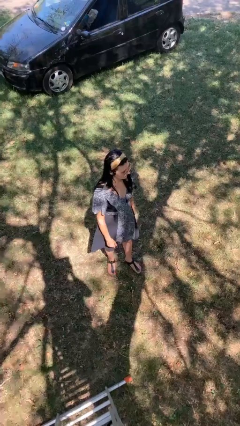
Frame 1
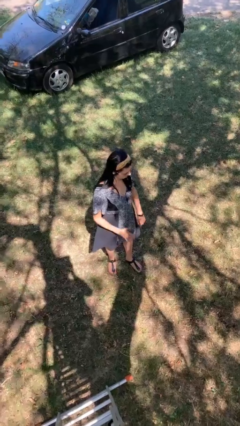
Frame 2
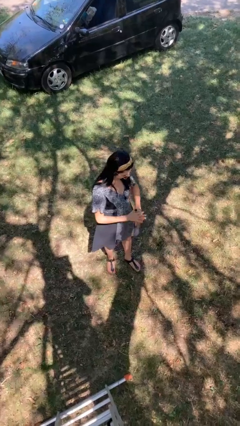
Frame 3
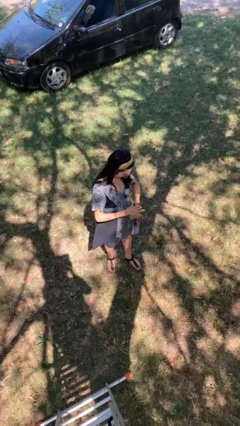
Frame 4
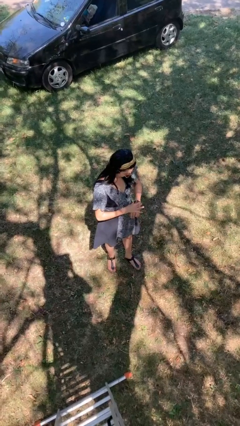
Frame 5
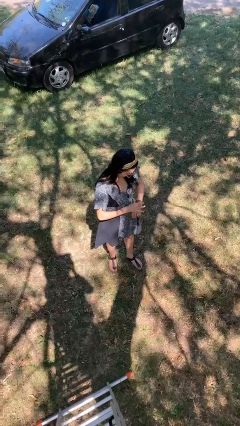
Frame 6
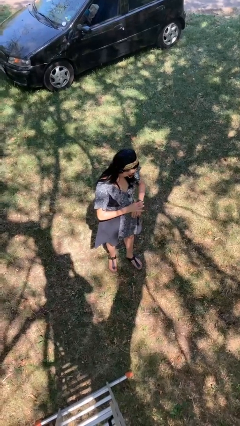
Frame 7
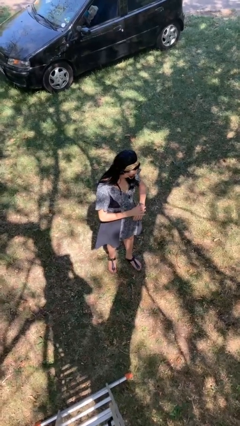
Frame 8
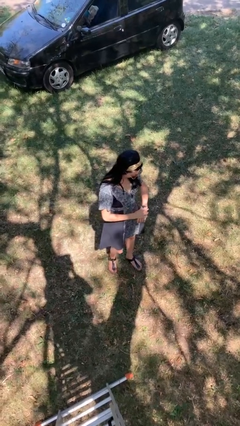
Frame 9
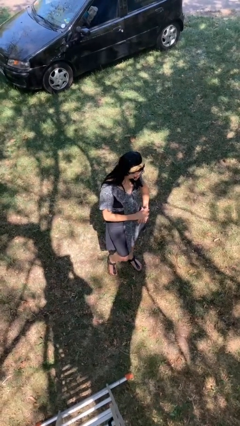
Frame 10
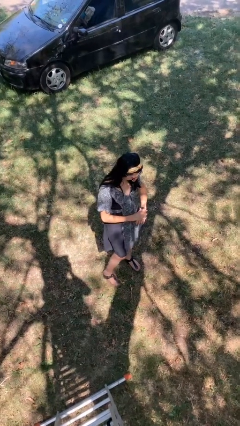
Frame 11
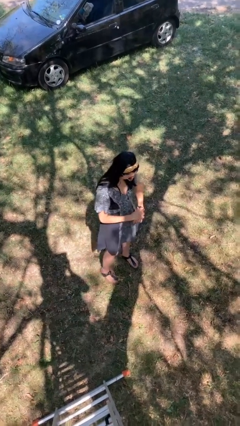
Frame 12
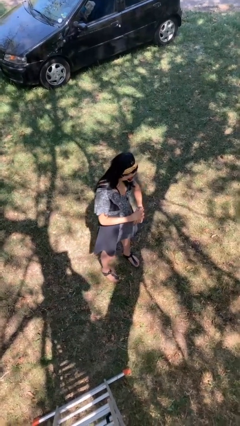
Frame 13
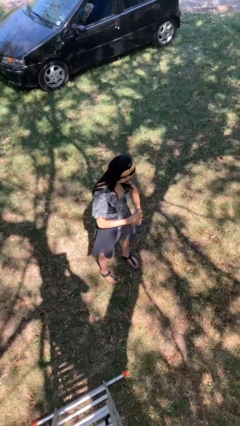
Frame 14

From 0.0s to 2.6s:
person looks at wristwatch

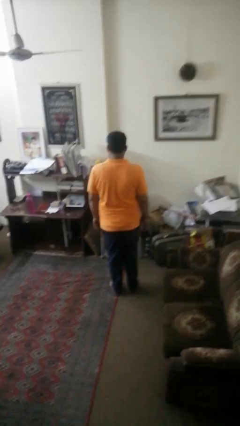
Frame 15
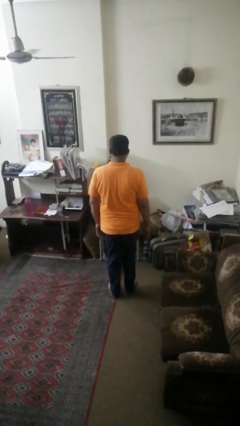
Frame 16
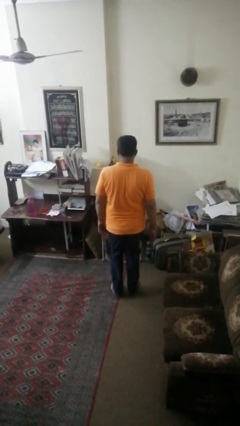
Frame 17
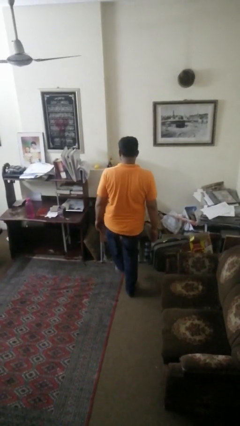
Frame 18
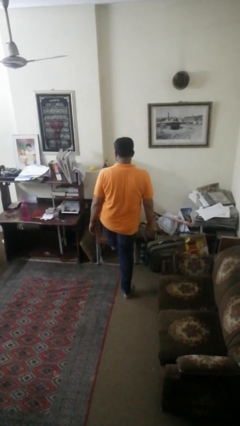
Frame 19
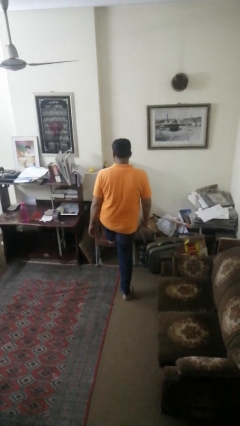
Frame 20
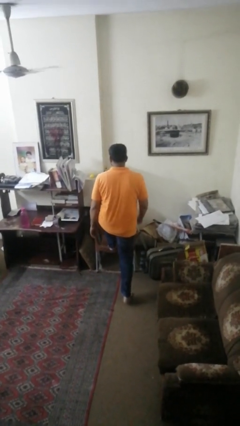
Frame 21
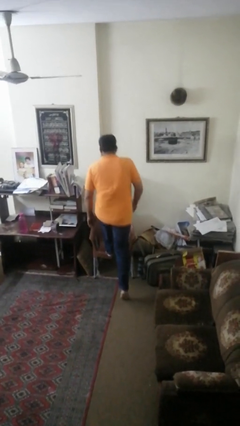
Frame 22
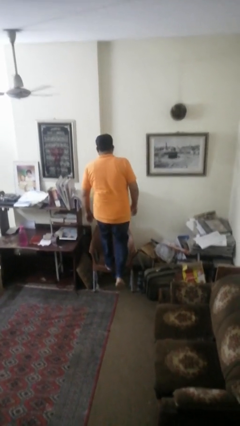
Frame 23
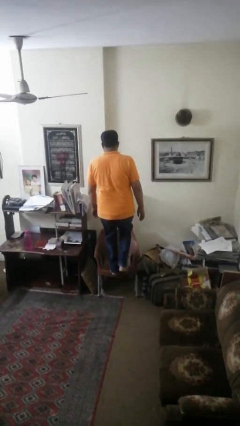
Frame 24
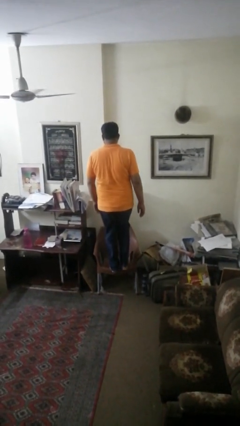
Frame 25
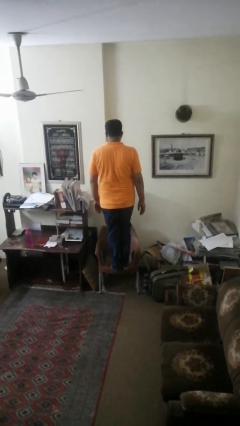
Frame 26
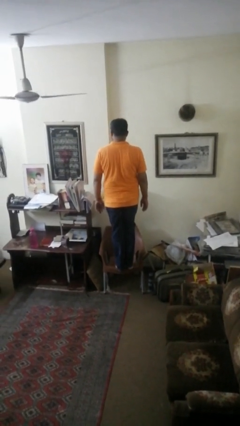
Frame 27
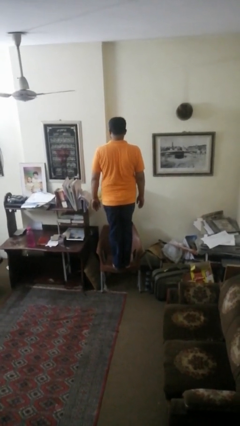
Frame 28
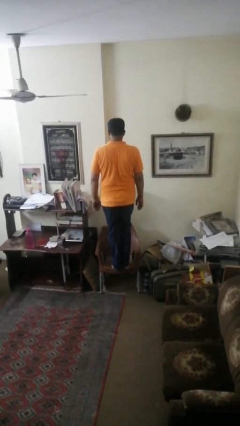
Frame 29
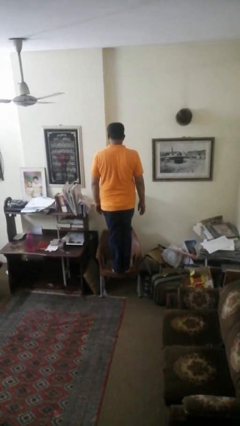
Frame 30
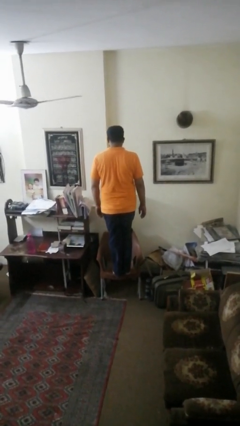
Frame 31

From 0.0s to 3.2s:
person climbs on chair

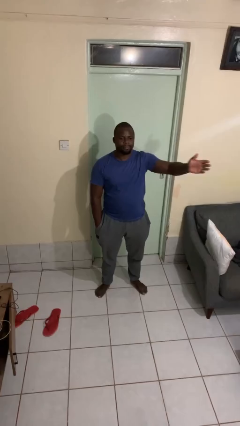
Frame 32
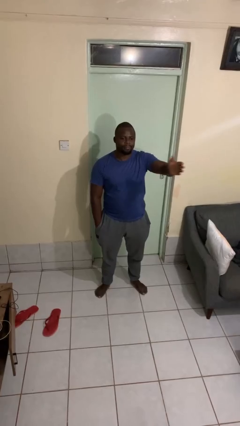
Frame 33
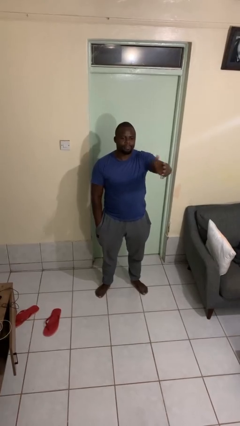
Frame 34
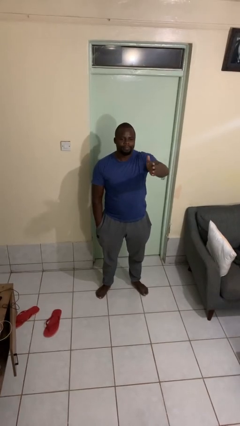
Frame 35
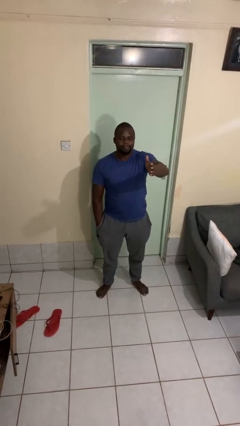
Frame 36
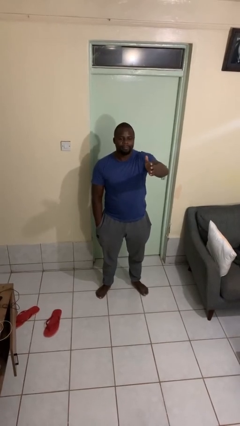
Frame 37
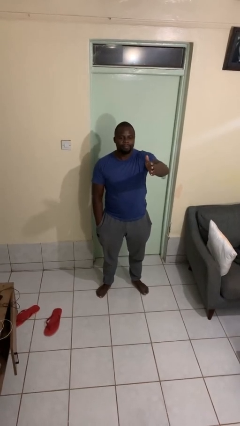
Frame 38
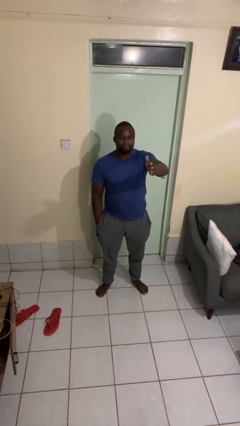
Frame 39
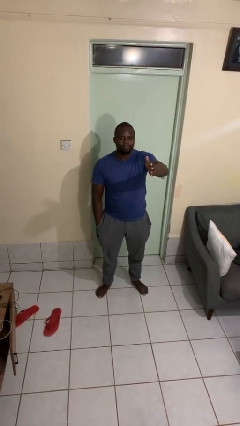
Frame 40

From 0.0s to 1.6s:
person gestures swipe right

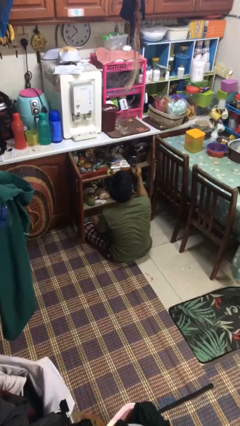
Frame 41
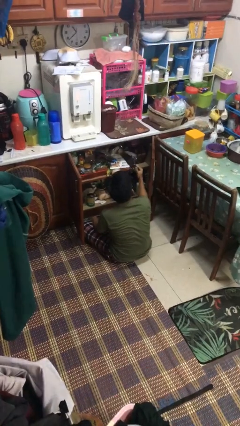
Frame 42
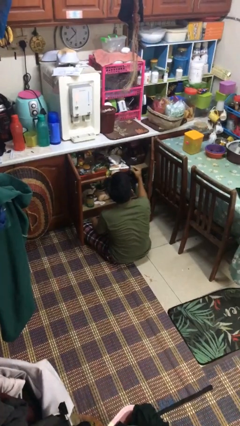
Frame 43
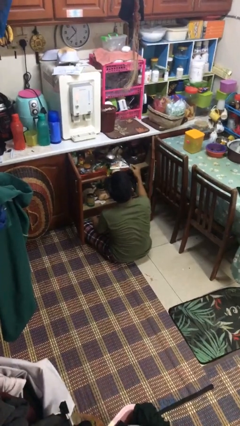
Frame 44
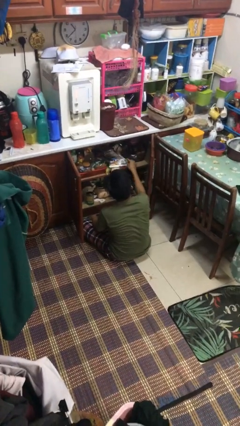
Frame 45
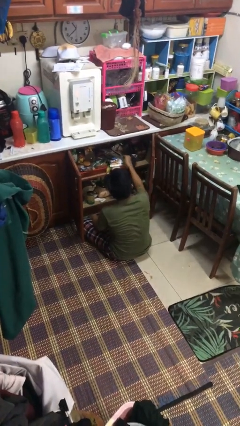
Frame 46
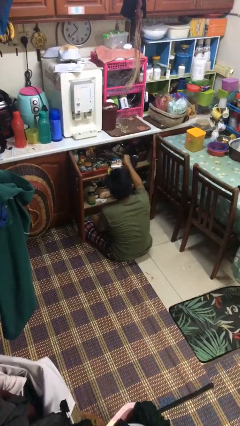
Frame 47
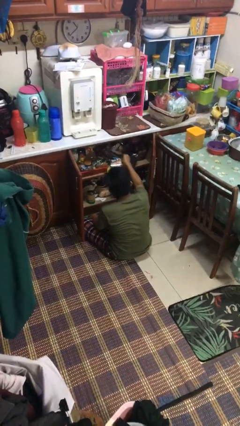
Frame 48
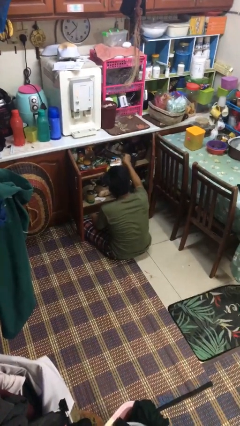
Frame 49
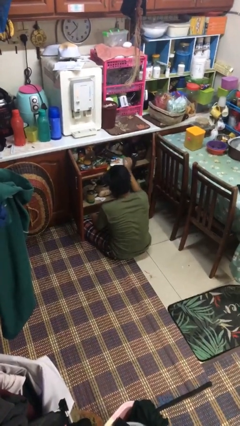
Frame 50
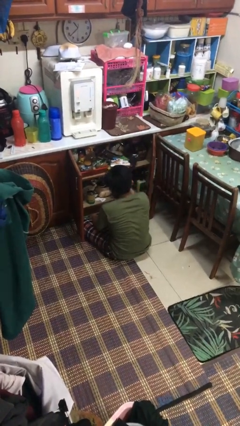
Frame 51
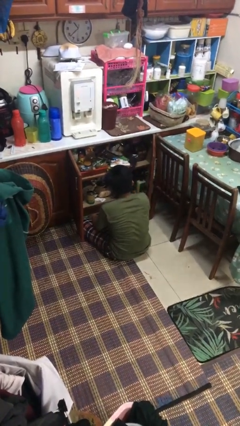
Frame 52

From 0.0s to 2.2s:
person puts object into kitchen drawer

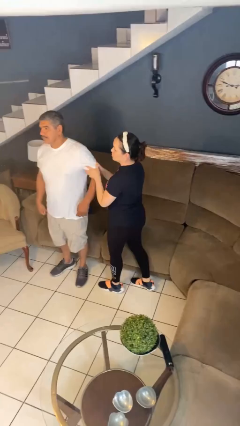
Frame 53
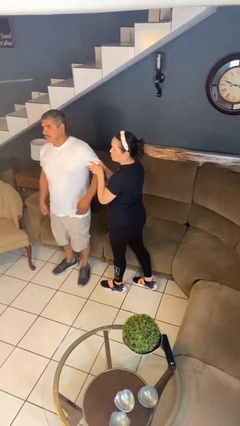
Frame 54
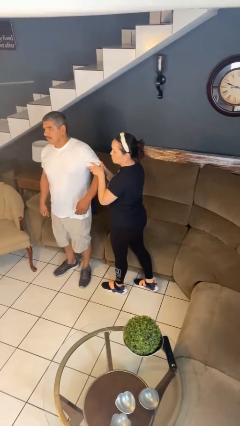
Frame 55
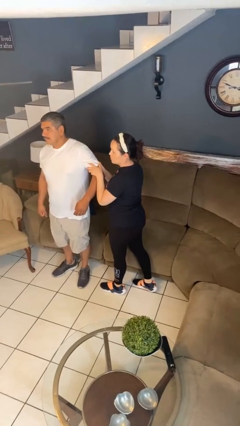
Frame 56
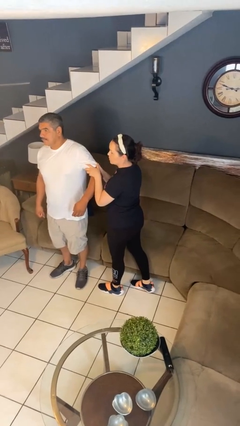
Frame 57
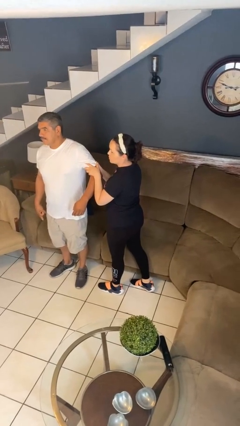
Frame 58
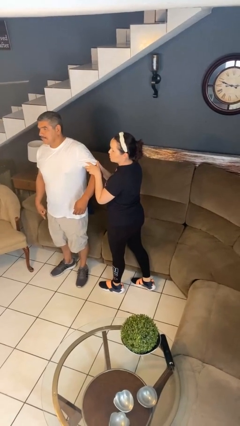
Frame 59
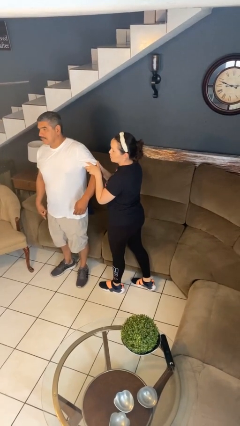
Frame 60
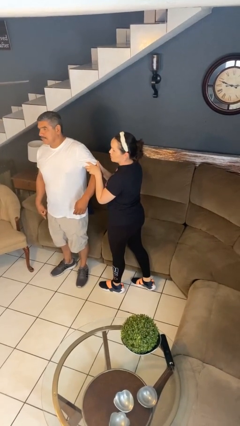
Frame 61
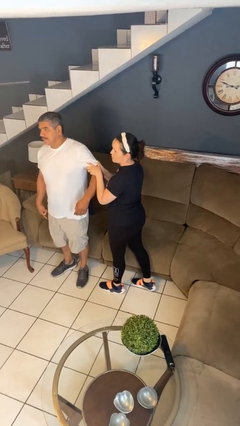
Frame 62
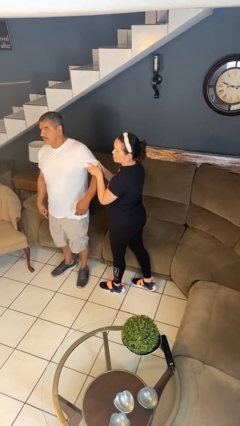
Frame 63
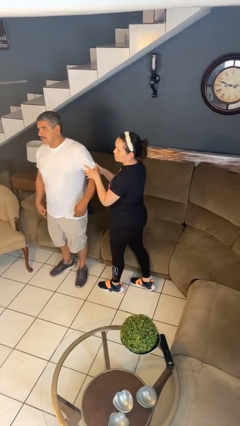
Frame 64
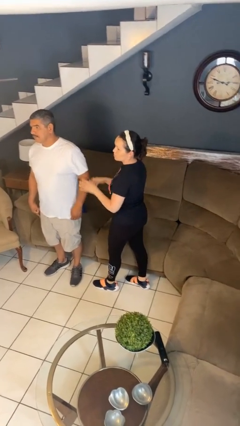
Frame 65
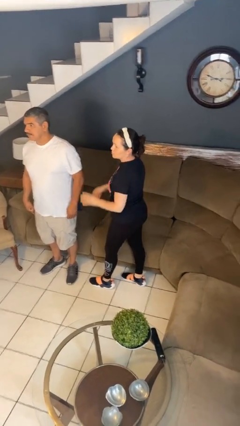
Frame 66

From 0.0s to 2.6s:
person grabs person by bicep

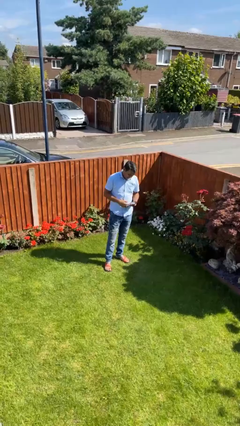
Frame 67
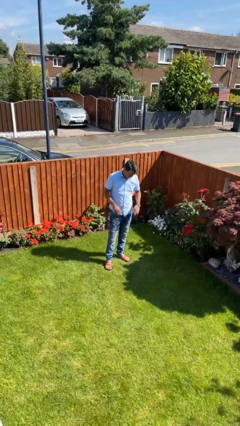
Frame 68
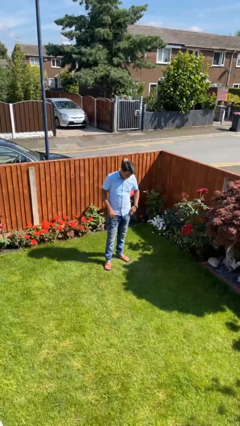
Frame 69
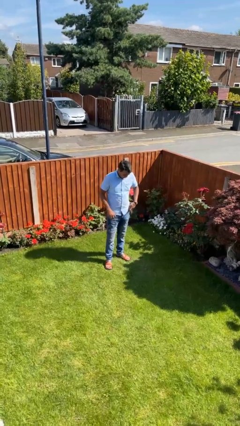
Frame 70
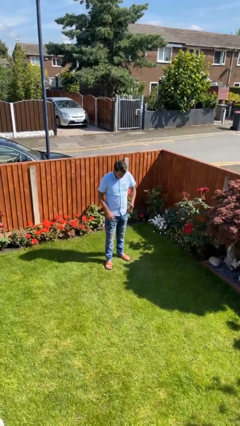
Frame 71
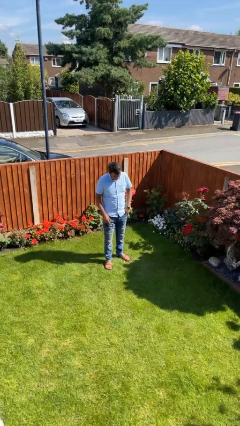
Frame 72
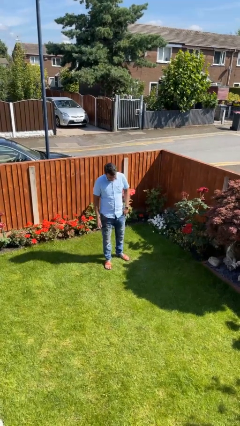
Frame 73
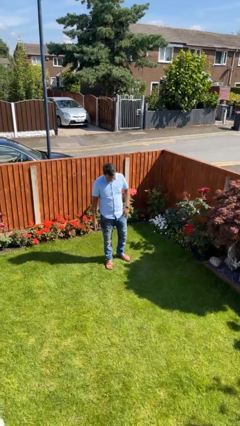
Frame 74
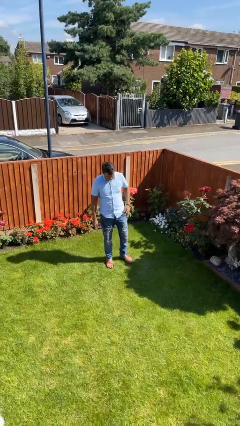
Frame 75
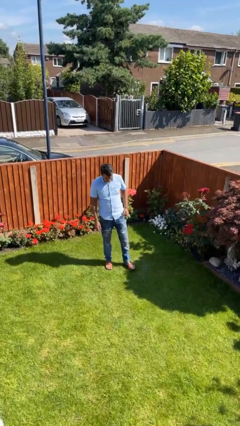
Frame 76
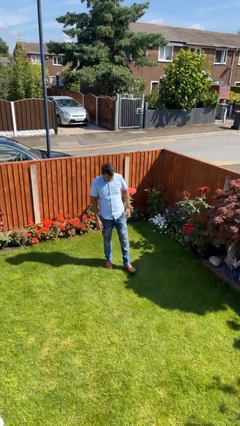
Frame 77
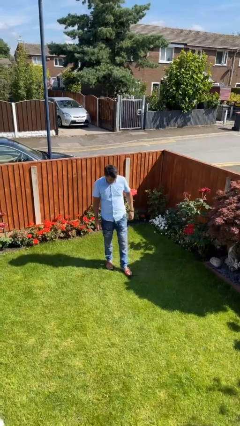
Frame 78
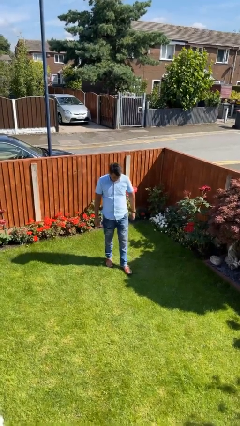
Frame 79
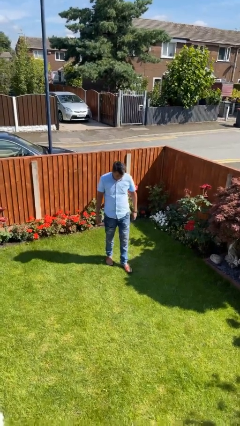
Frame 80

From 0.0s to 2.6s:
person puts phone into pocket

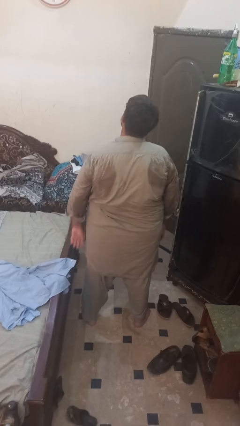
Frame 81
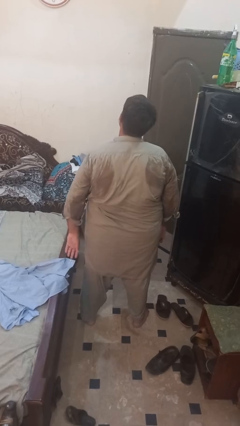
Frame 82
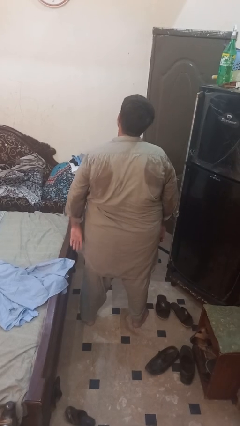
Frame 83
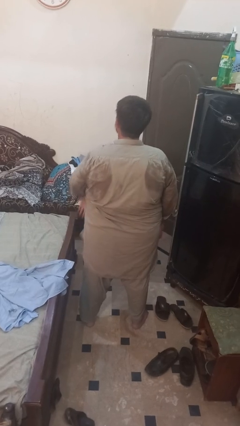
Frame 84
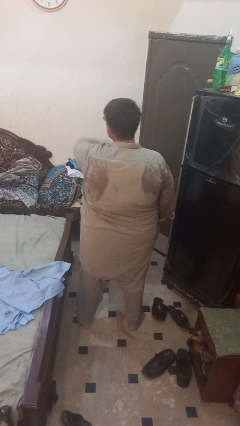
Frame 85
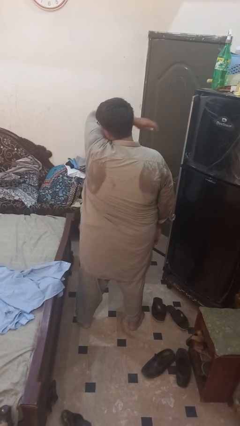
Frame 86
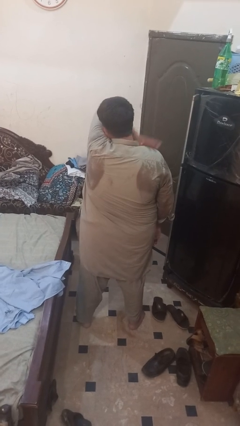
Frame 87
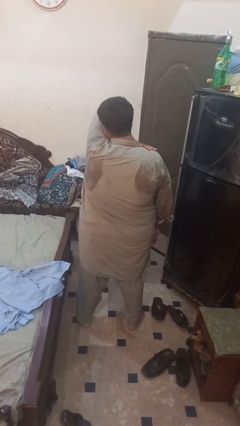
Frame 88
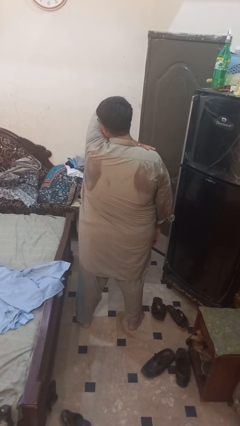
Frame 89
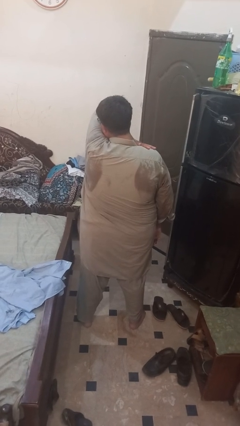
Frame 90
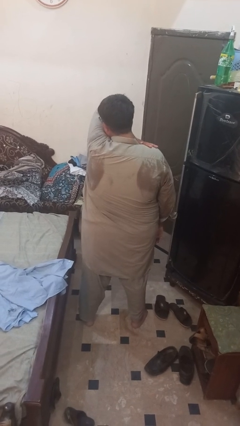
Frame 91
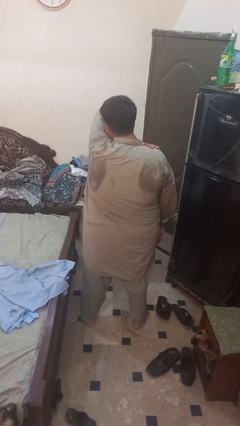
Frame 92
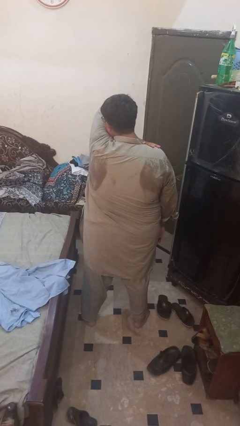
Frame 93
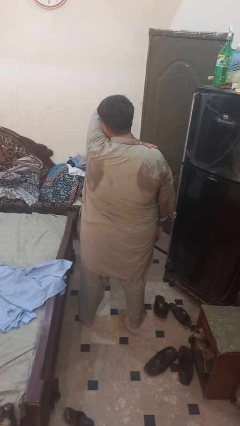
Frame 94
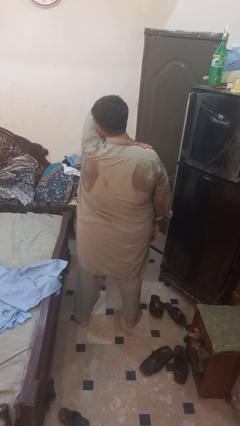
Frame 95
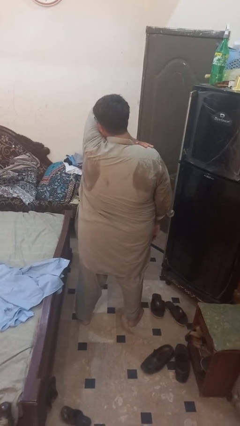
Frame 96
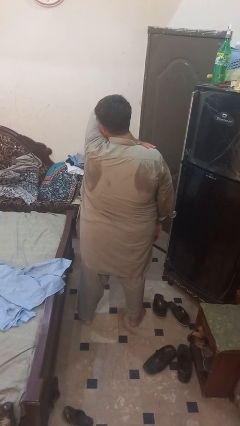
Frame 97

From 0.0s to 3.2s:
person sneezes into arm
